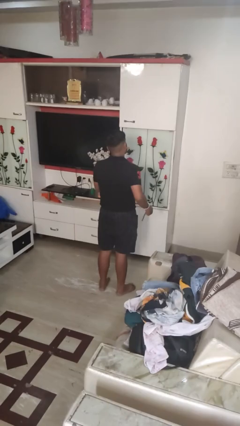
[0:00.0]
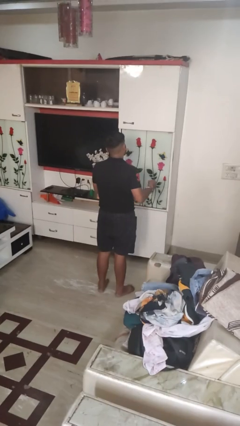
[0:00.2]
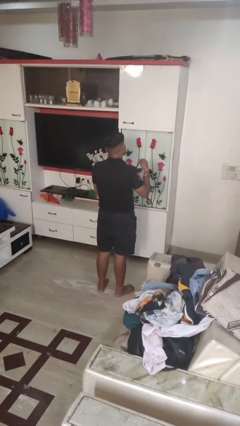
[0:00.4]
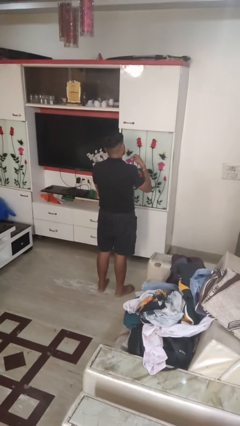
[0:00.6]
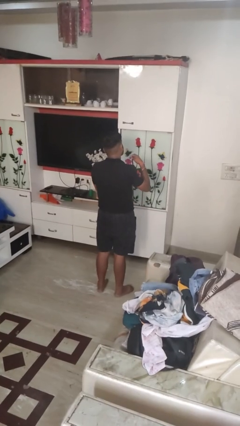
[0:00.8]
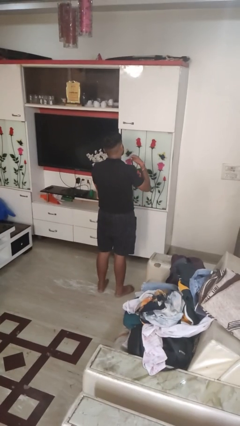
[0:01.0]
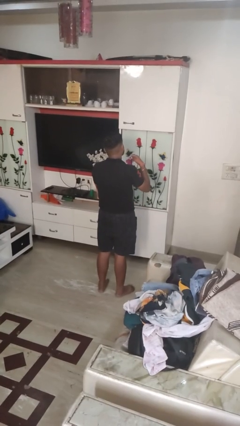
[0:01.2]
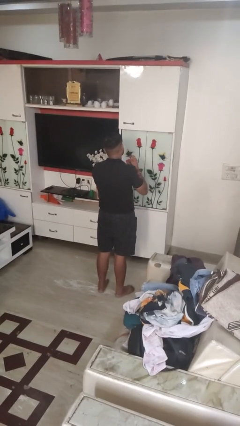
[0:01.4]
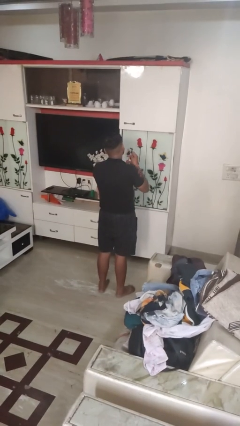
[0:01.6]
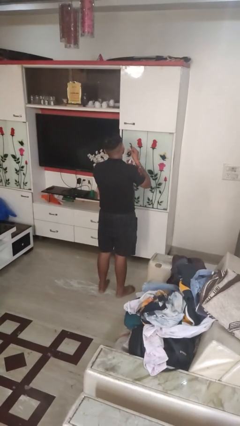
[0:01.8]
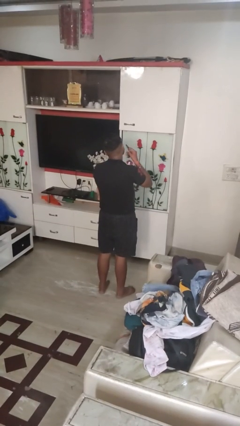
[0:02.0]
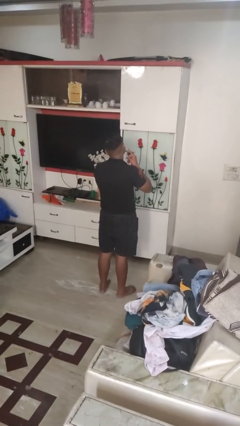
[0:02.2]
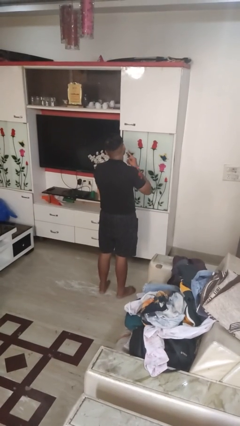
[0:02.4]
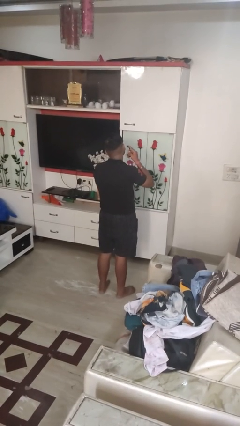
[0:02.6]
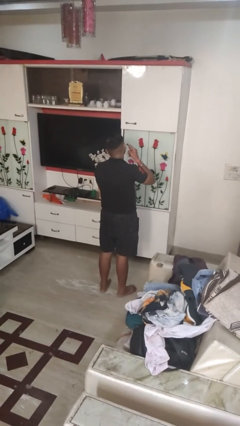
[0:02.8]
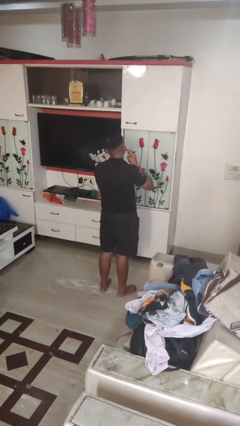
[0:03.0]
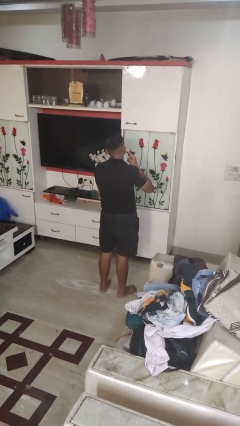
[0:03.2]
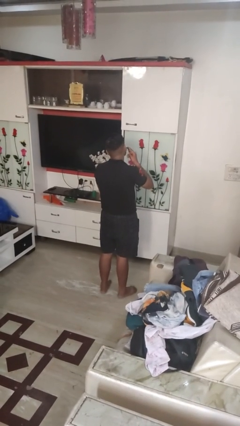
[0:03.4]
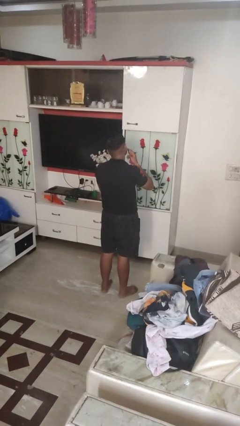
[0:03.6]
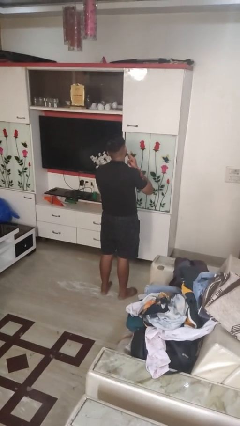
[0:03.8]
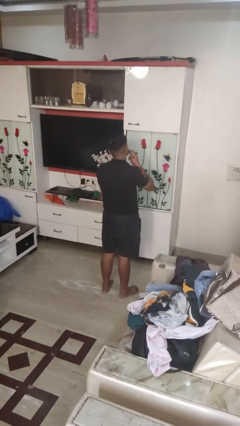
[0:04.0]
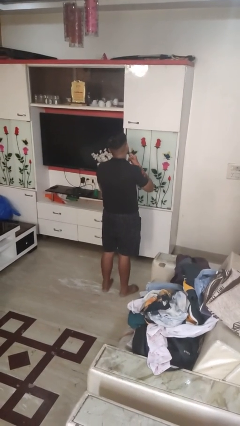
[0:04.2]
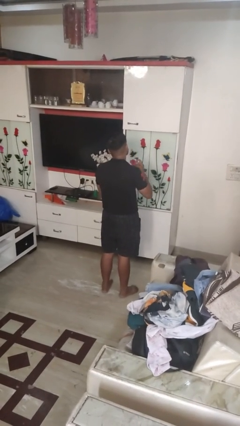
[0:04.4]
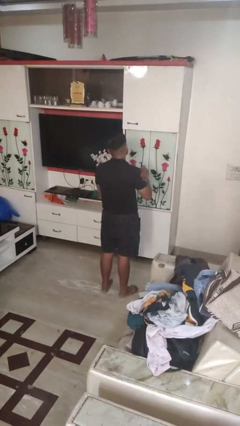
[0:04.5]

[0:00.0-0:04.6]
person shaves face

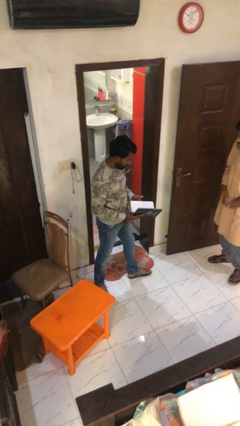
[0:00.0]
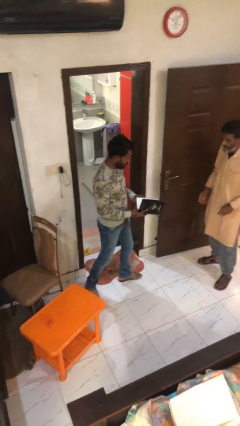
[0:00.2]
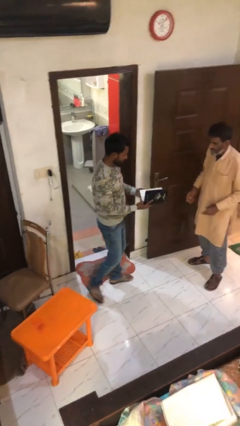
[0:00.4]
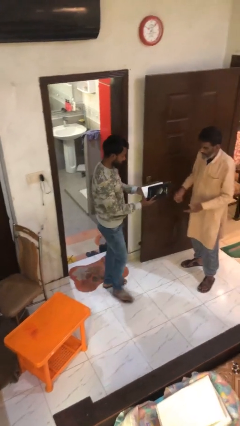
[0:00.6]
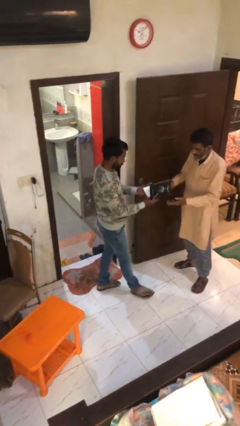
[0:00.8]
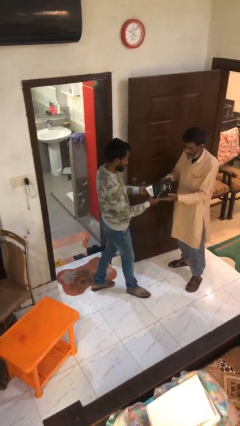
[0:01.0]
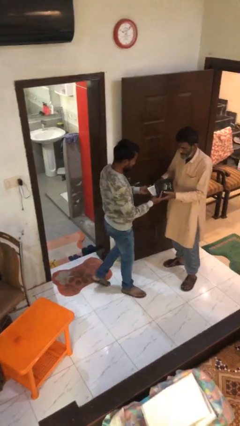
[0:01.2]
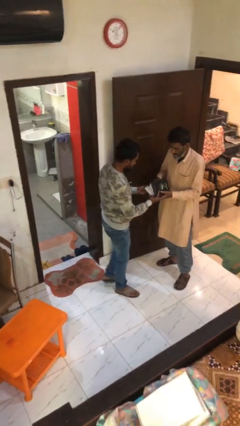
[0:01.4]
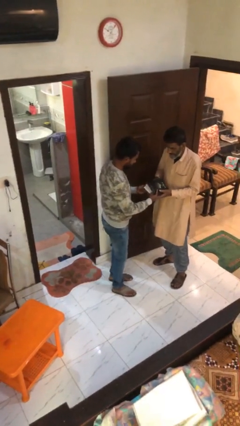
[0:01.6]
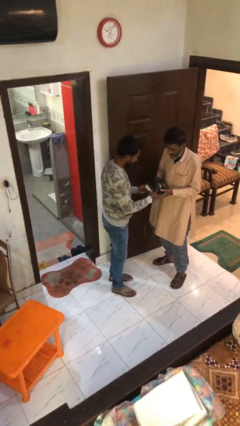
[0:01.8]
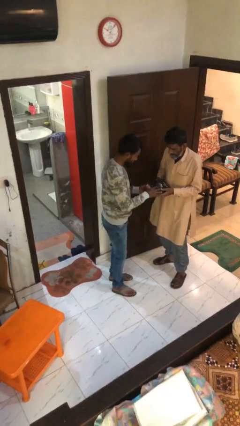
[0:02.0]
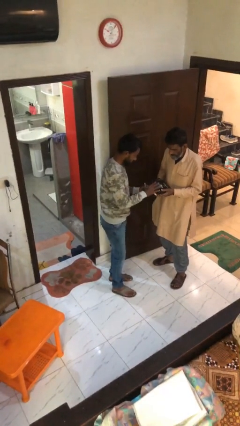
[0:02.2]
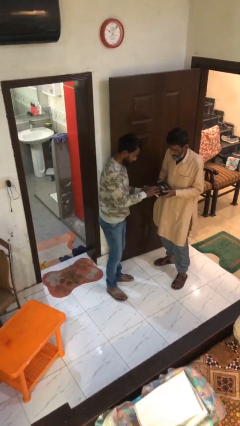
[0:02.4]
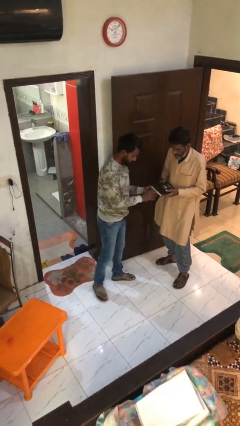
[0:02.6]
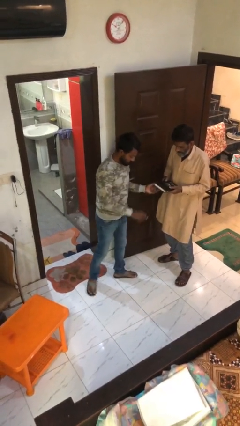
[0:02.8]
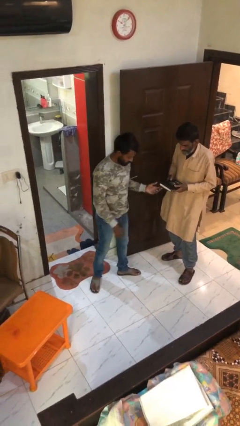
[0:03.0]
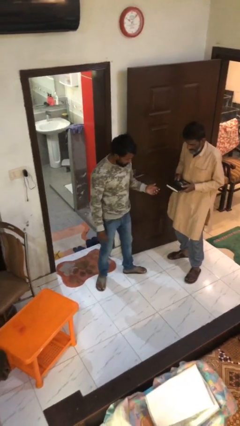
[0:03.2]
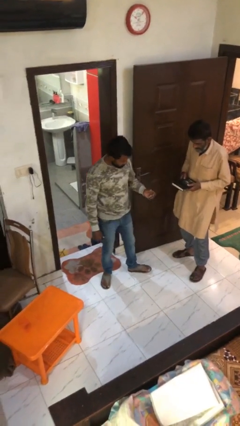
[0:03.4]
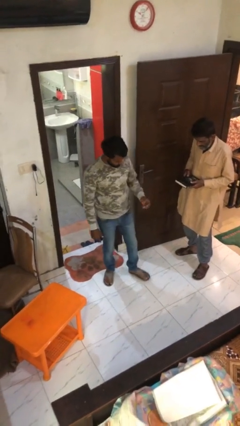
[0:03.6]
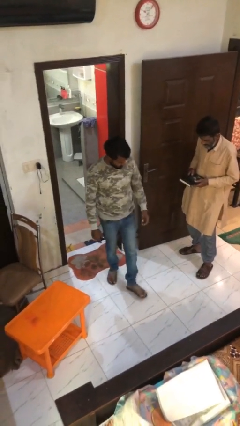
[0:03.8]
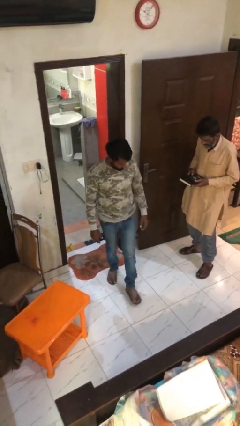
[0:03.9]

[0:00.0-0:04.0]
person transfers object to person

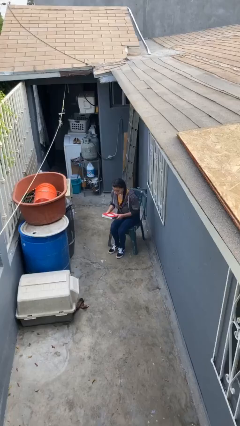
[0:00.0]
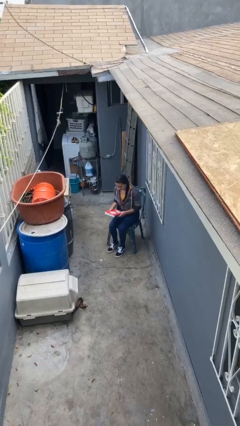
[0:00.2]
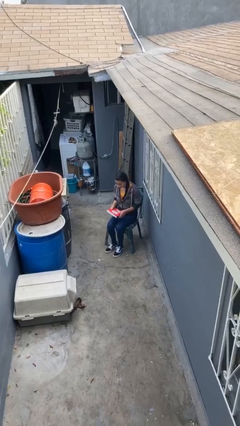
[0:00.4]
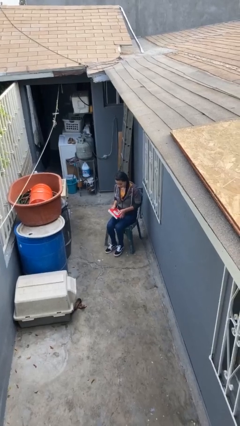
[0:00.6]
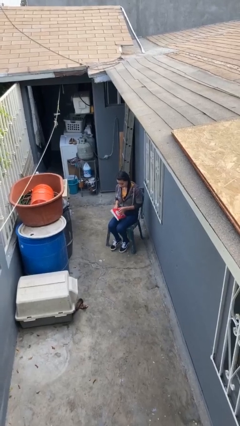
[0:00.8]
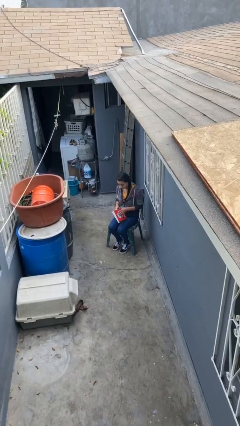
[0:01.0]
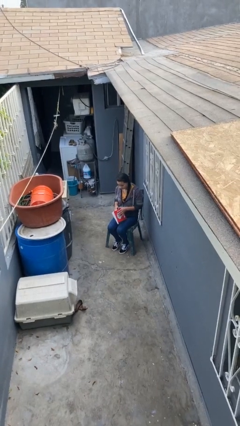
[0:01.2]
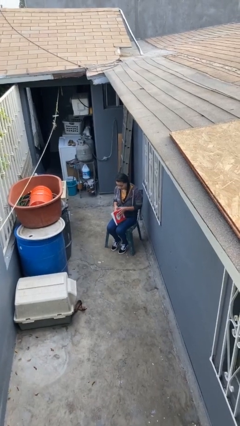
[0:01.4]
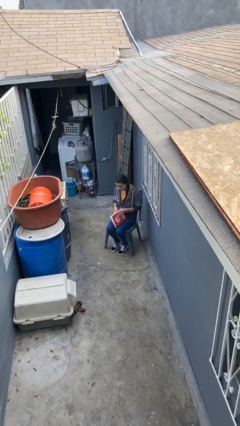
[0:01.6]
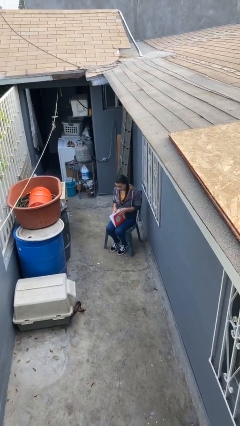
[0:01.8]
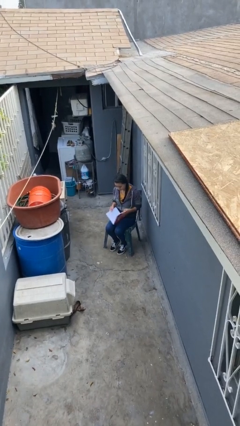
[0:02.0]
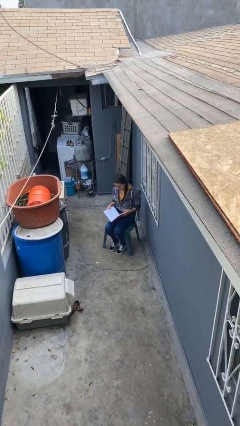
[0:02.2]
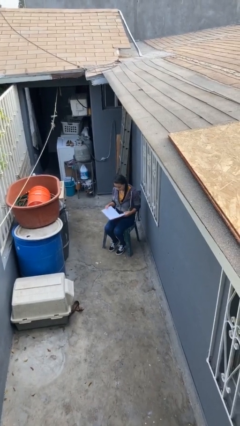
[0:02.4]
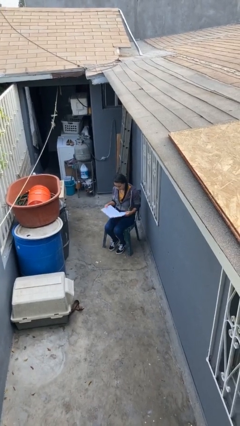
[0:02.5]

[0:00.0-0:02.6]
person sits down

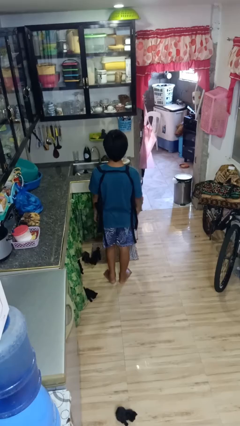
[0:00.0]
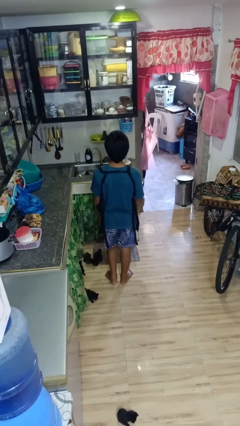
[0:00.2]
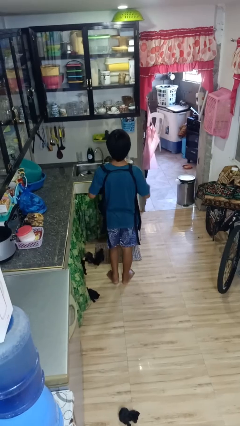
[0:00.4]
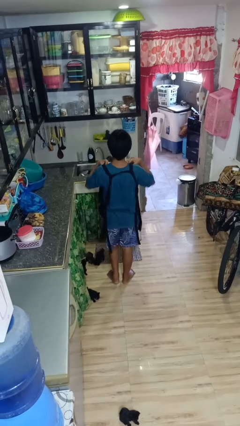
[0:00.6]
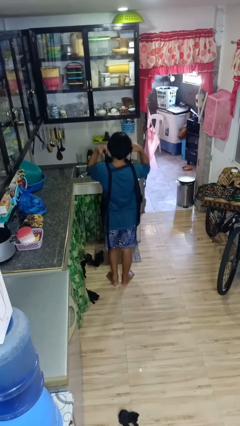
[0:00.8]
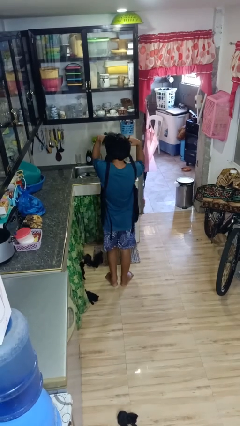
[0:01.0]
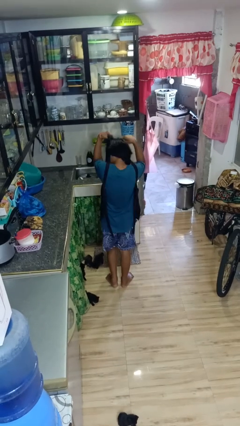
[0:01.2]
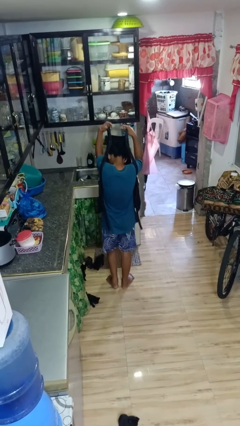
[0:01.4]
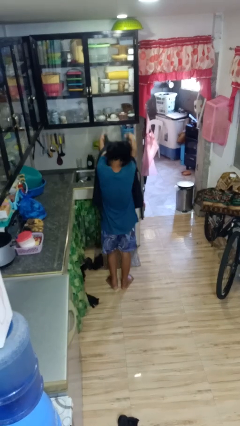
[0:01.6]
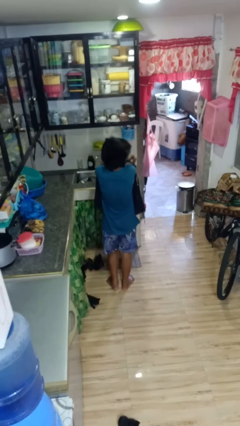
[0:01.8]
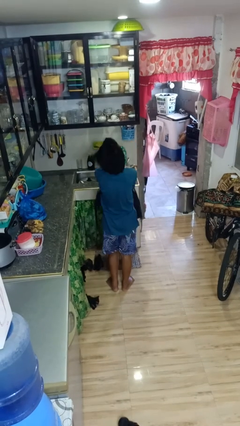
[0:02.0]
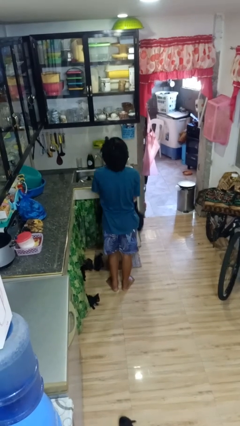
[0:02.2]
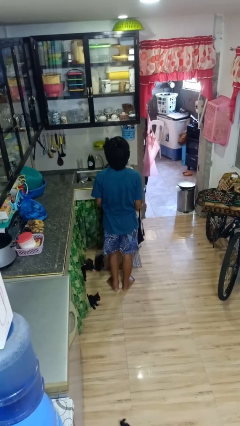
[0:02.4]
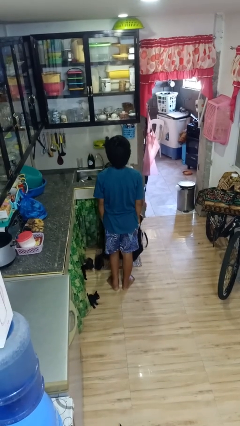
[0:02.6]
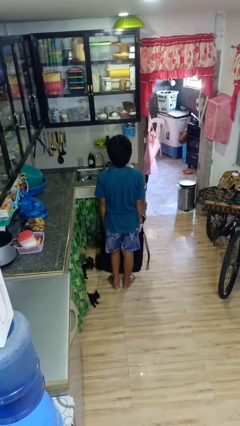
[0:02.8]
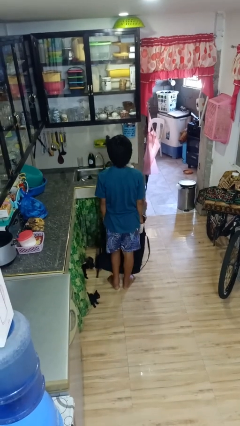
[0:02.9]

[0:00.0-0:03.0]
person takes off apron

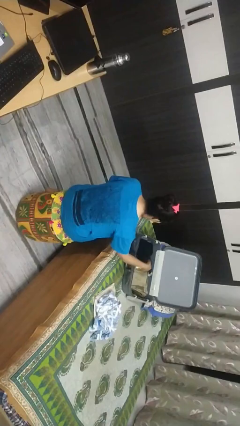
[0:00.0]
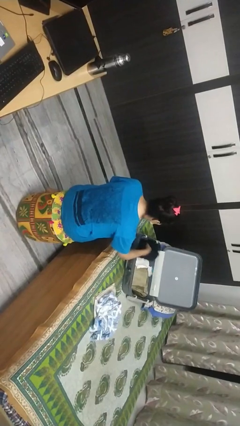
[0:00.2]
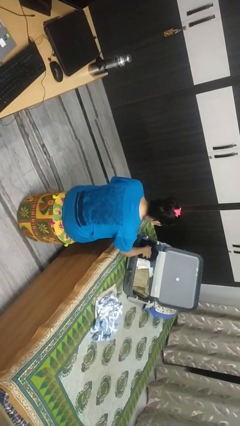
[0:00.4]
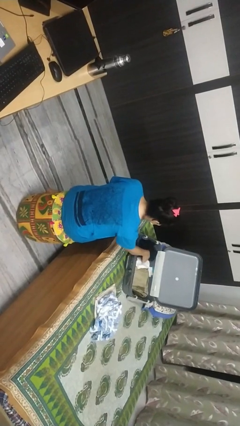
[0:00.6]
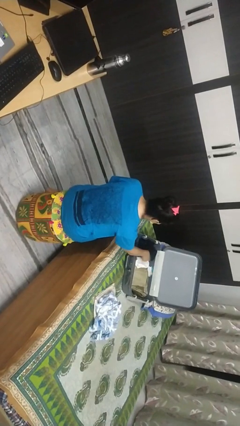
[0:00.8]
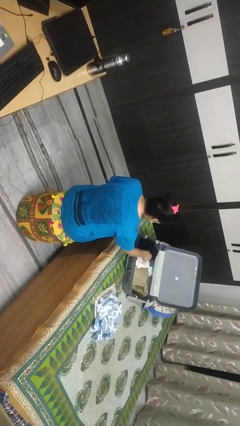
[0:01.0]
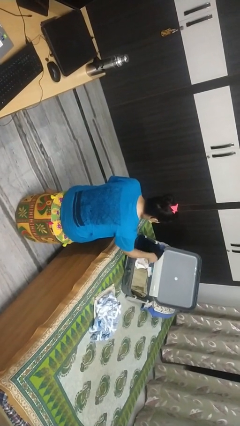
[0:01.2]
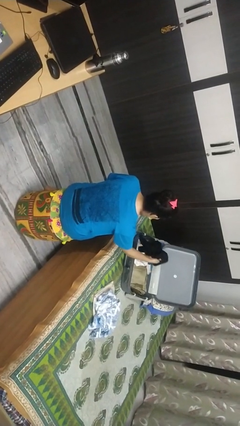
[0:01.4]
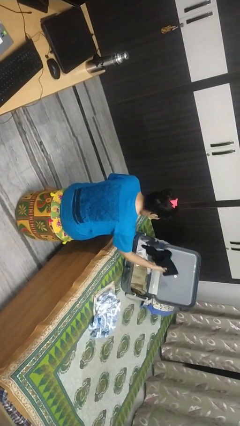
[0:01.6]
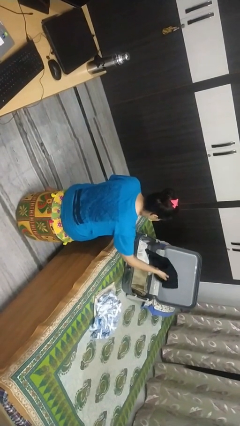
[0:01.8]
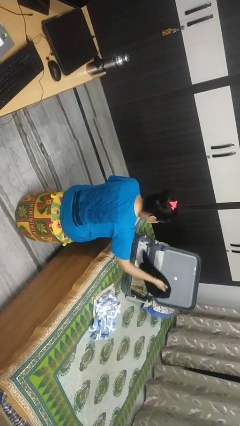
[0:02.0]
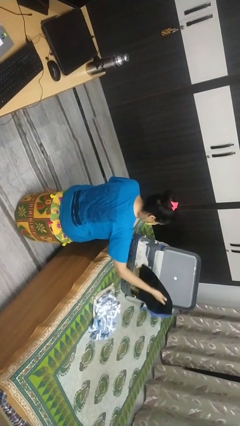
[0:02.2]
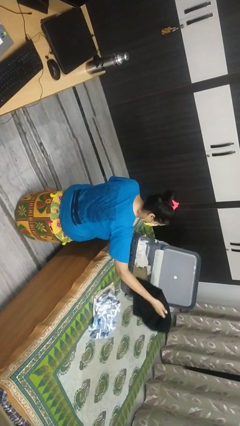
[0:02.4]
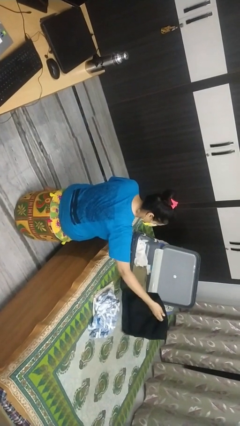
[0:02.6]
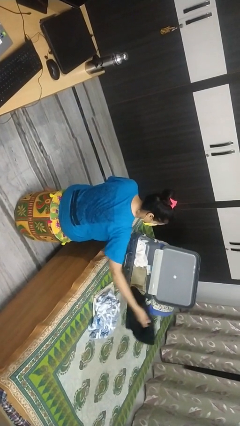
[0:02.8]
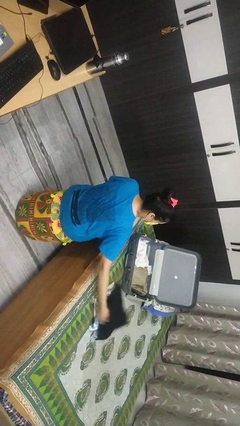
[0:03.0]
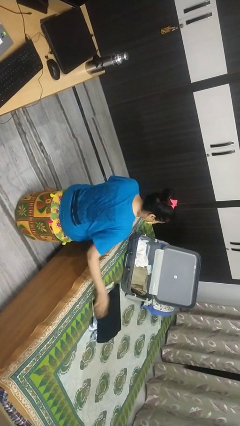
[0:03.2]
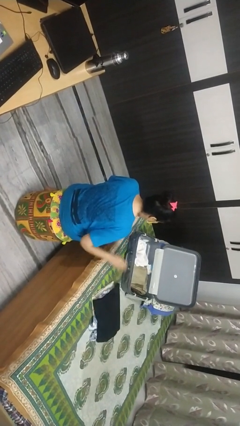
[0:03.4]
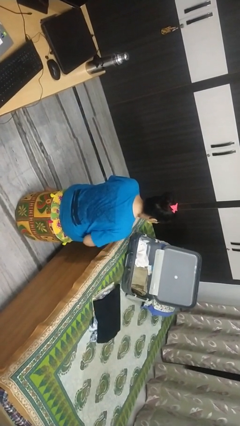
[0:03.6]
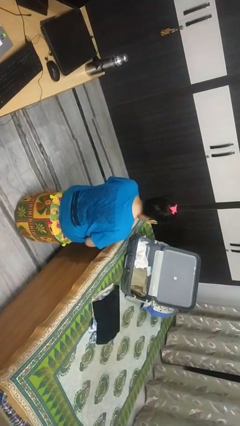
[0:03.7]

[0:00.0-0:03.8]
person unloads clothes from suitcase
